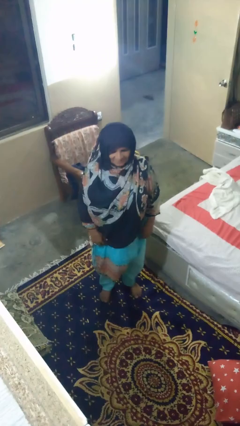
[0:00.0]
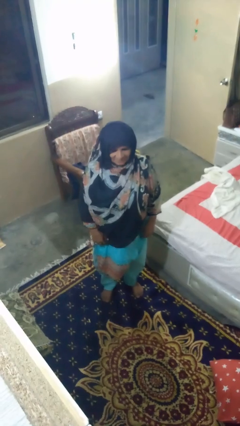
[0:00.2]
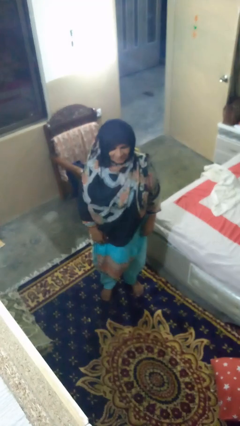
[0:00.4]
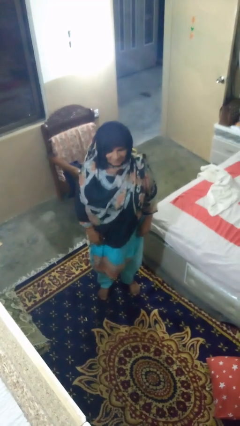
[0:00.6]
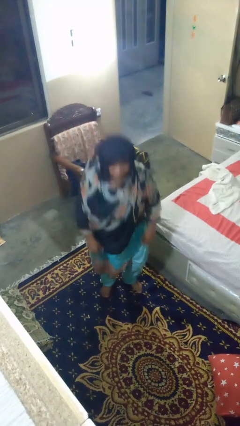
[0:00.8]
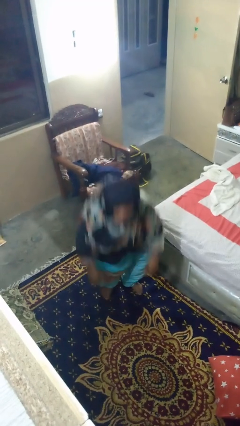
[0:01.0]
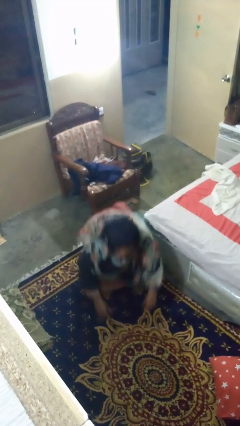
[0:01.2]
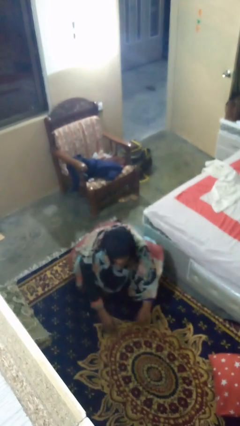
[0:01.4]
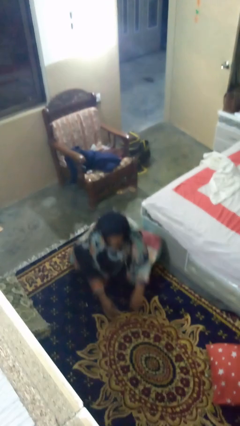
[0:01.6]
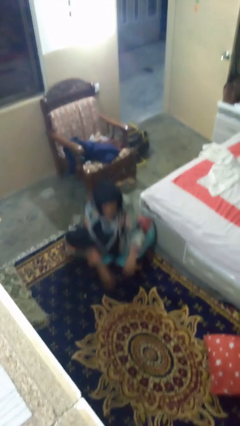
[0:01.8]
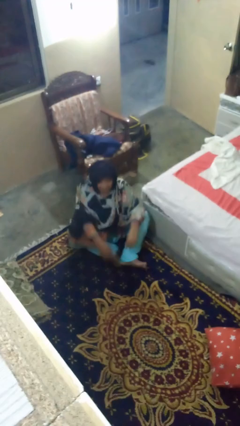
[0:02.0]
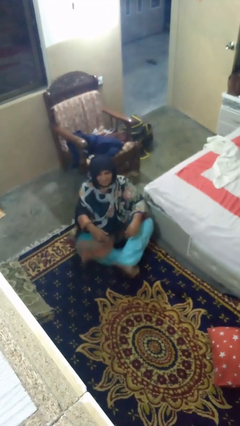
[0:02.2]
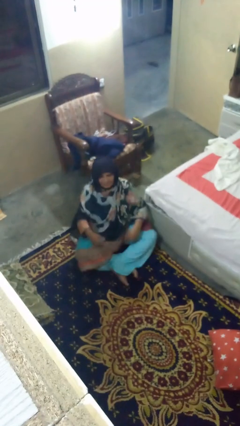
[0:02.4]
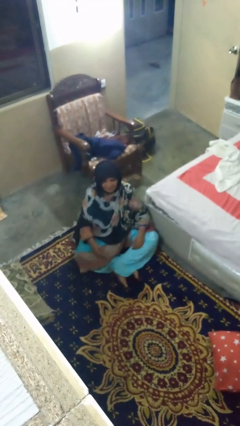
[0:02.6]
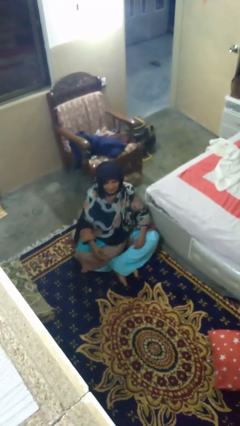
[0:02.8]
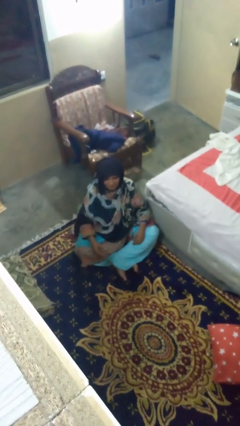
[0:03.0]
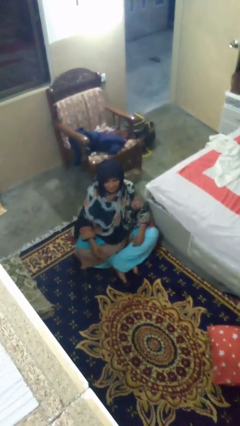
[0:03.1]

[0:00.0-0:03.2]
person sits crisscross

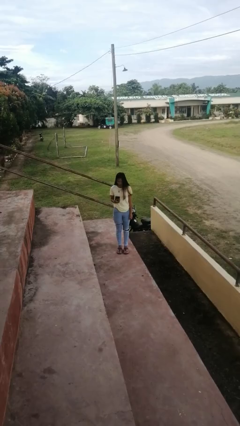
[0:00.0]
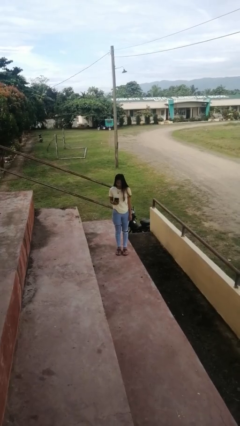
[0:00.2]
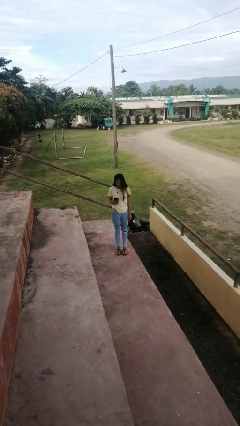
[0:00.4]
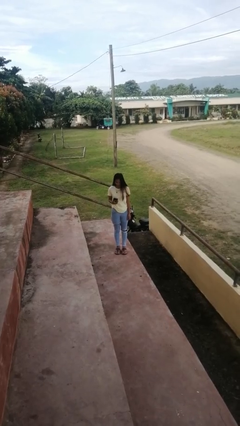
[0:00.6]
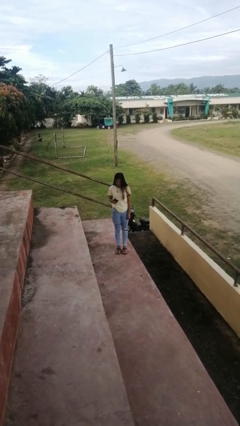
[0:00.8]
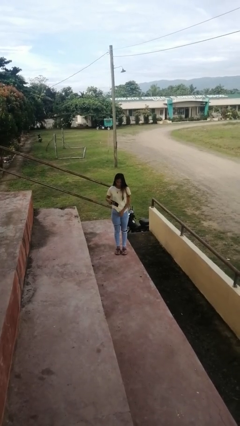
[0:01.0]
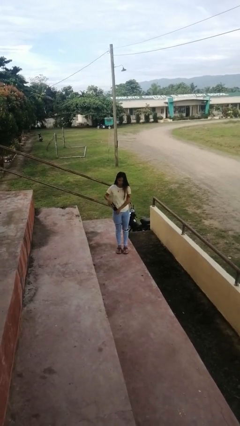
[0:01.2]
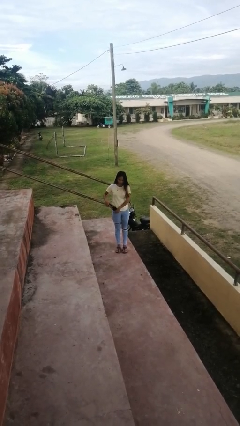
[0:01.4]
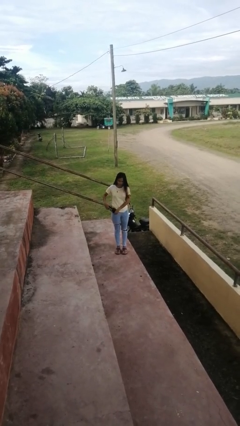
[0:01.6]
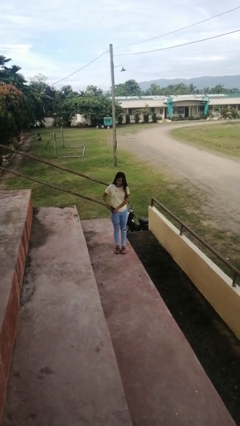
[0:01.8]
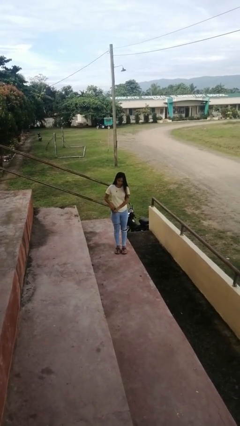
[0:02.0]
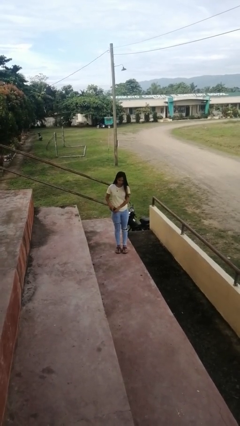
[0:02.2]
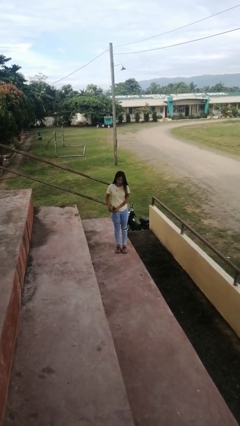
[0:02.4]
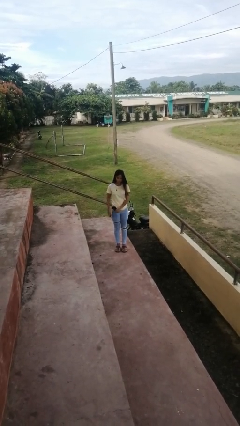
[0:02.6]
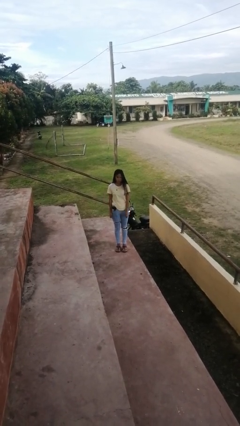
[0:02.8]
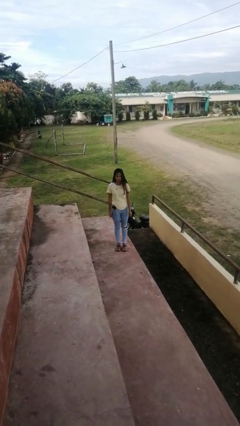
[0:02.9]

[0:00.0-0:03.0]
person puts phone into pocket

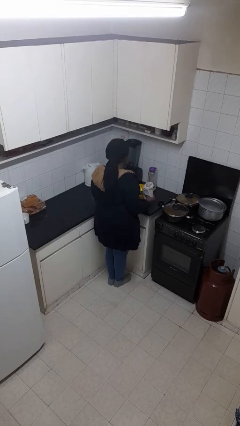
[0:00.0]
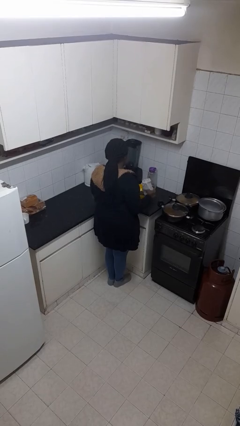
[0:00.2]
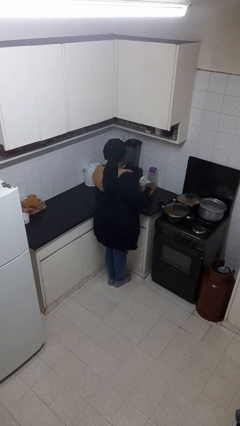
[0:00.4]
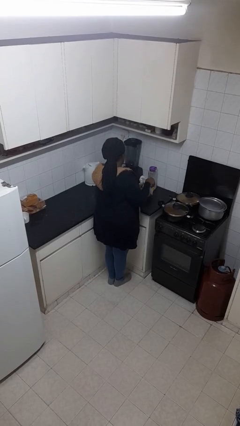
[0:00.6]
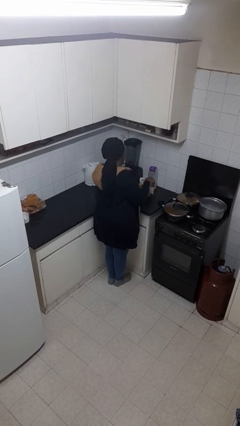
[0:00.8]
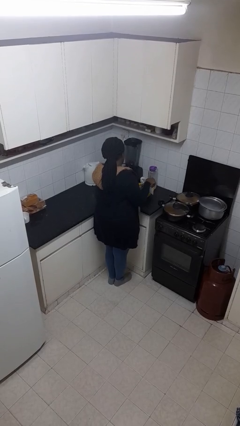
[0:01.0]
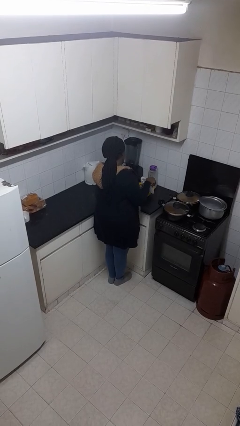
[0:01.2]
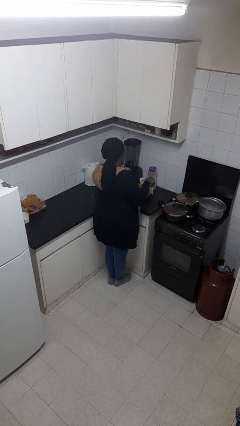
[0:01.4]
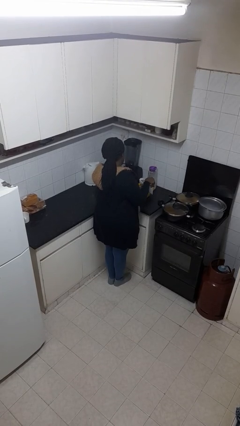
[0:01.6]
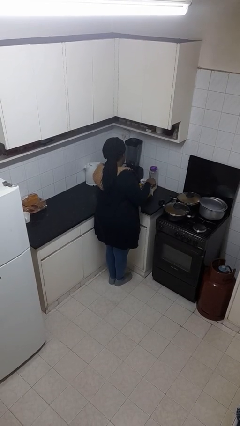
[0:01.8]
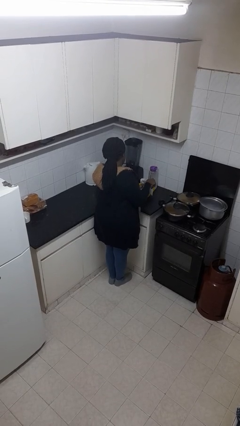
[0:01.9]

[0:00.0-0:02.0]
person pours into bowl

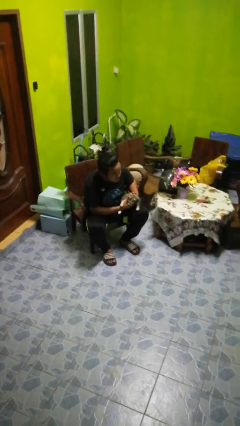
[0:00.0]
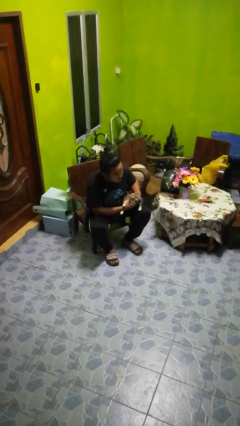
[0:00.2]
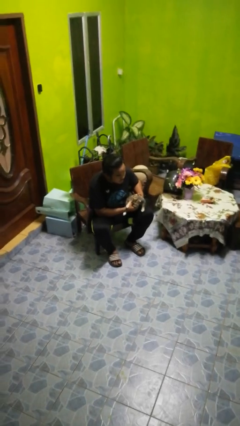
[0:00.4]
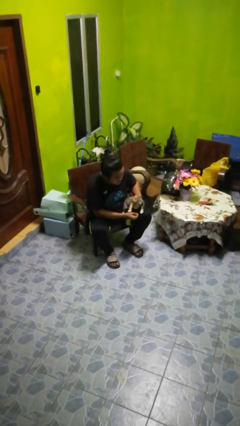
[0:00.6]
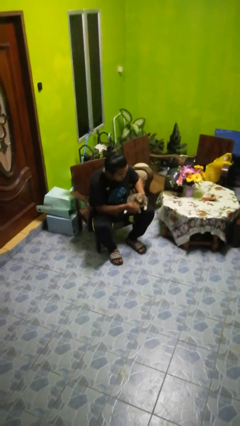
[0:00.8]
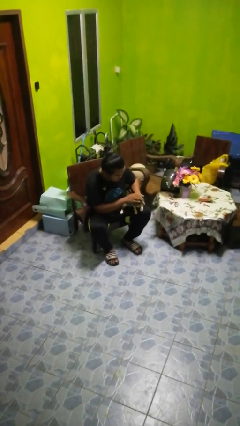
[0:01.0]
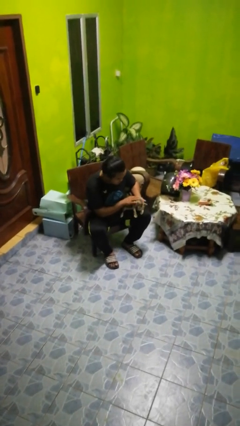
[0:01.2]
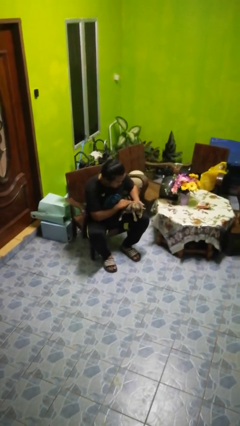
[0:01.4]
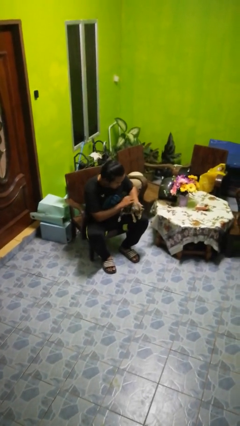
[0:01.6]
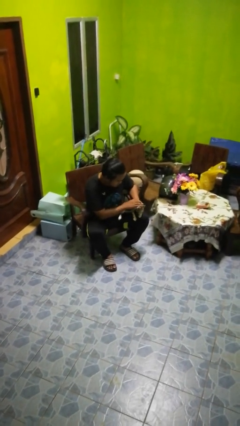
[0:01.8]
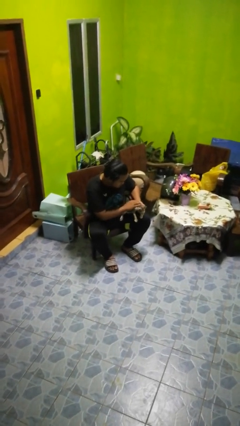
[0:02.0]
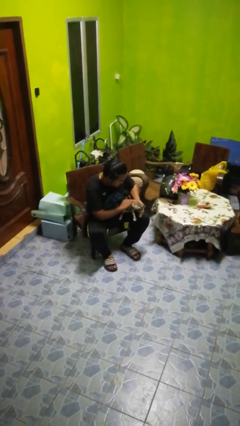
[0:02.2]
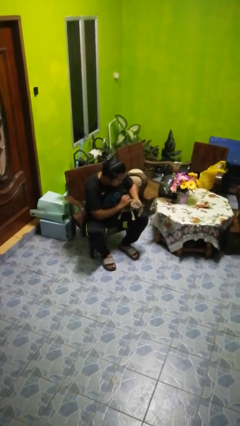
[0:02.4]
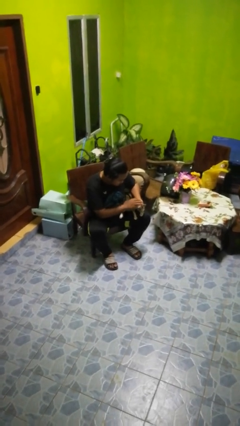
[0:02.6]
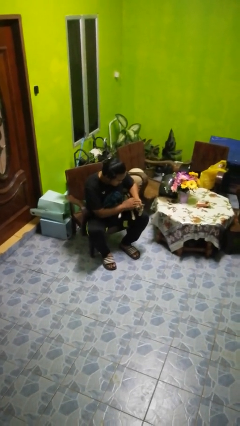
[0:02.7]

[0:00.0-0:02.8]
person pets cat

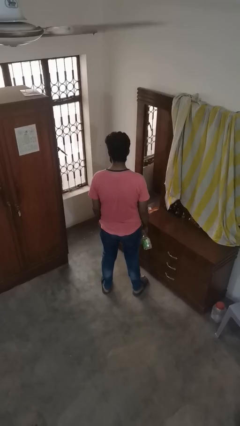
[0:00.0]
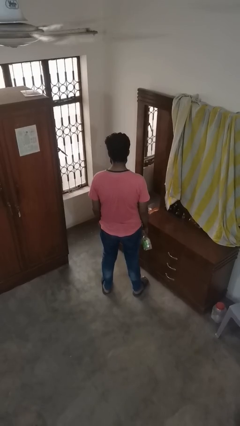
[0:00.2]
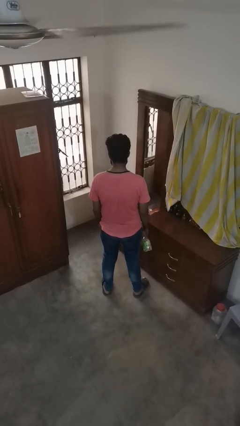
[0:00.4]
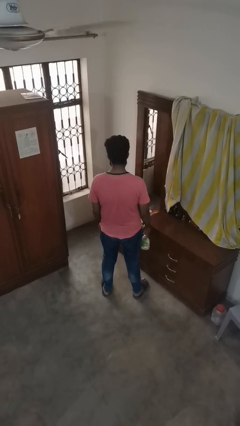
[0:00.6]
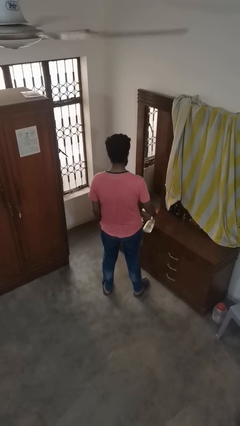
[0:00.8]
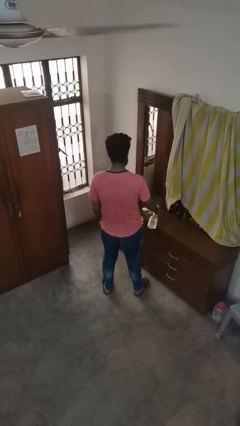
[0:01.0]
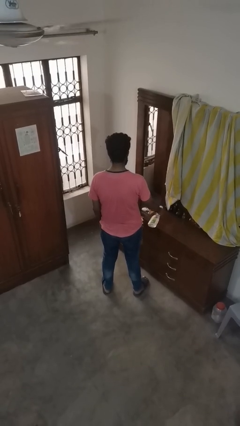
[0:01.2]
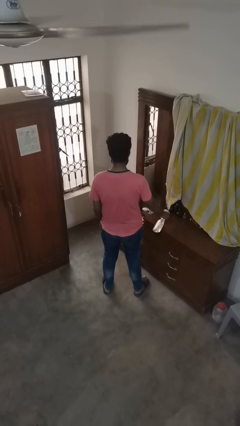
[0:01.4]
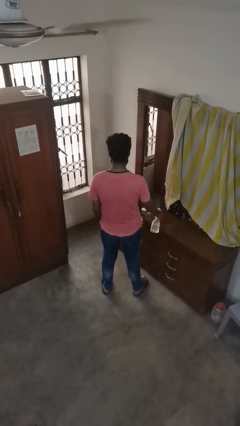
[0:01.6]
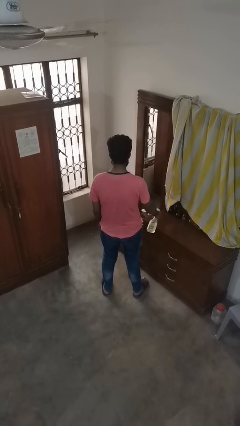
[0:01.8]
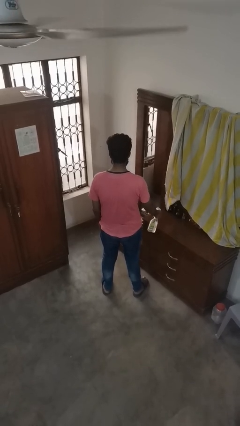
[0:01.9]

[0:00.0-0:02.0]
person sprays from bottle

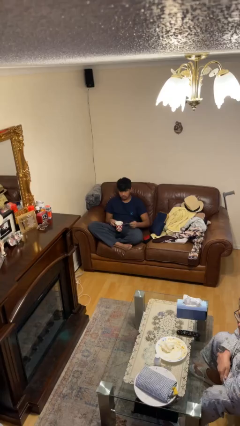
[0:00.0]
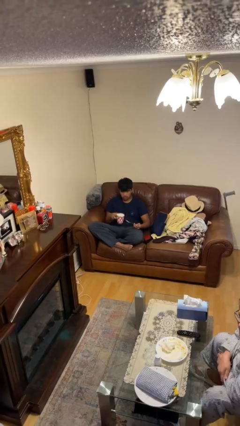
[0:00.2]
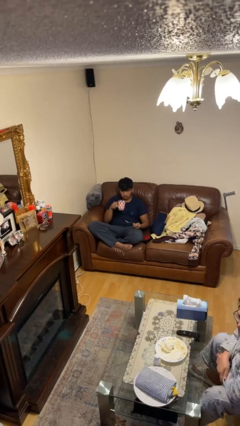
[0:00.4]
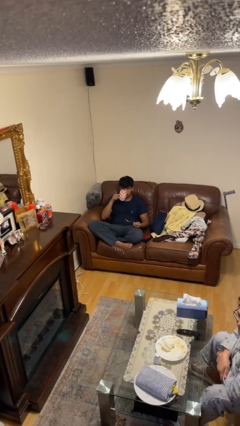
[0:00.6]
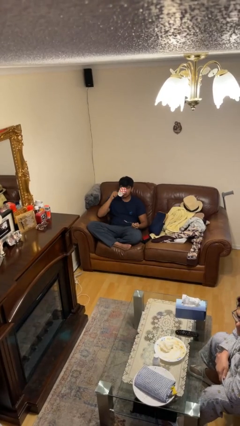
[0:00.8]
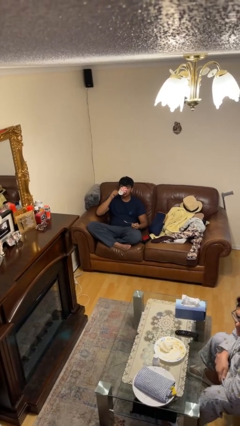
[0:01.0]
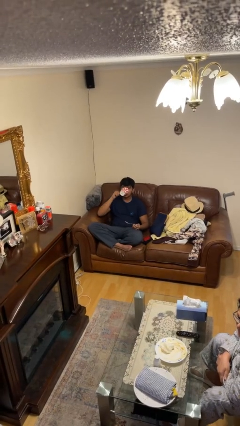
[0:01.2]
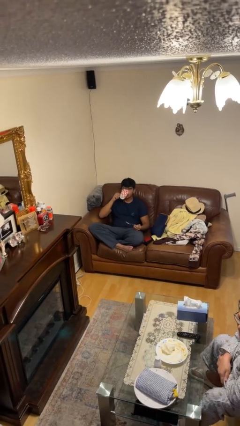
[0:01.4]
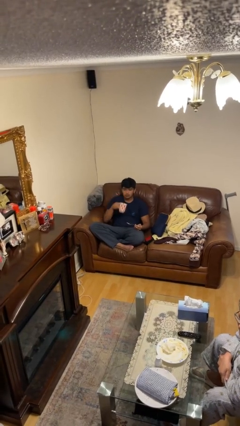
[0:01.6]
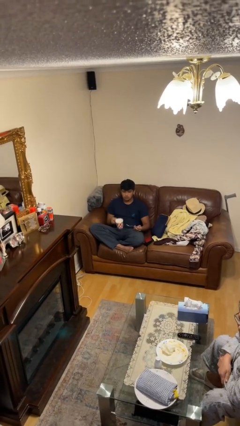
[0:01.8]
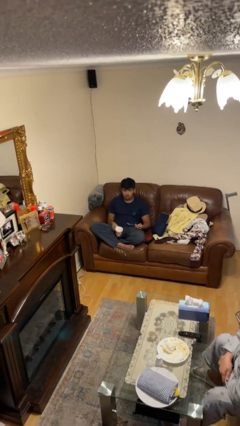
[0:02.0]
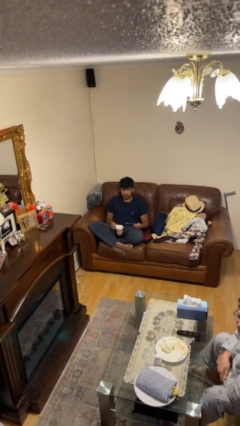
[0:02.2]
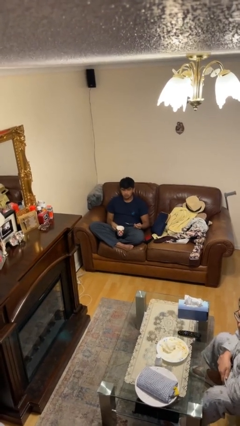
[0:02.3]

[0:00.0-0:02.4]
person drinks from mug

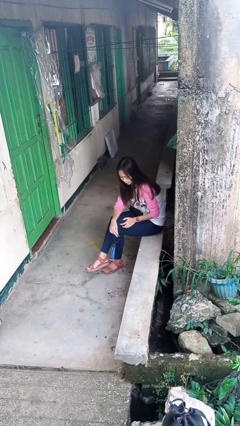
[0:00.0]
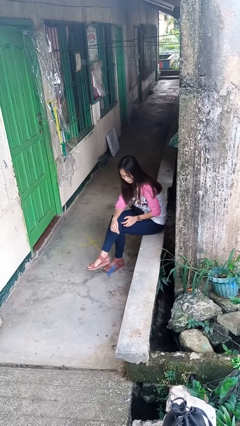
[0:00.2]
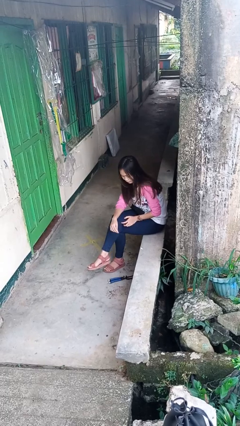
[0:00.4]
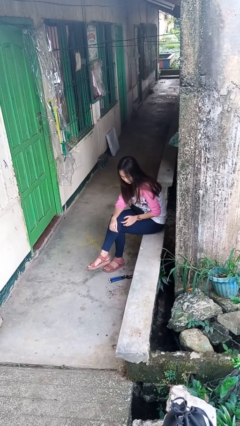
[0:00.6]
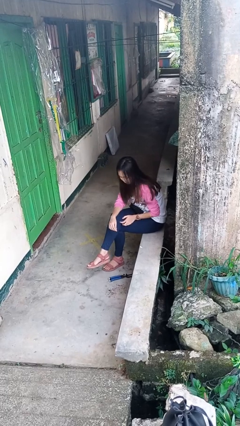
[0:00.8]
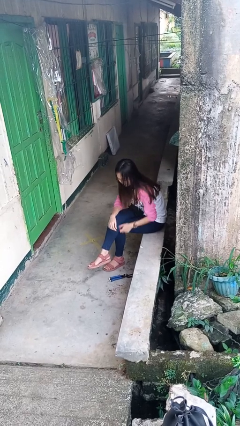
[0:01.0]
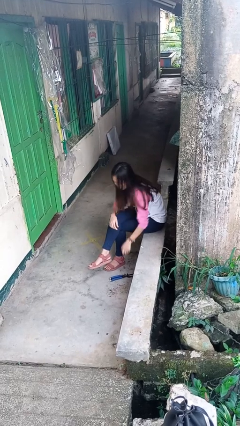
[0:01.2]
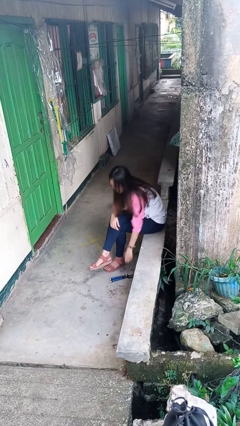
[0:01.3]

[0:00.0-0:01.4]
person drops object
